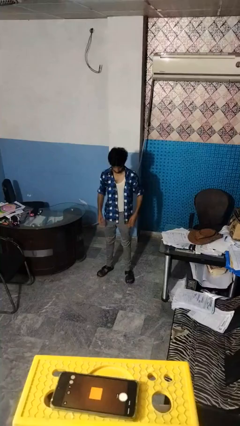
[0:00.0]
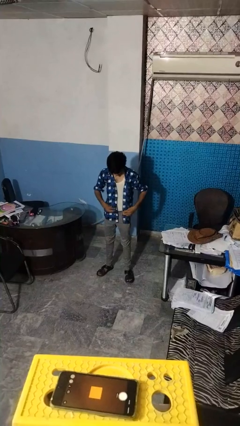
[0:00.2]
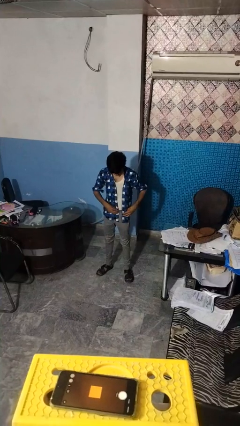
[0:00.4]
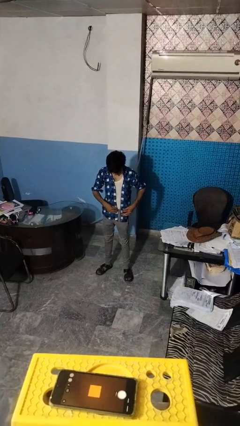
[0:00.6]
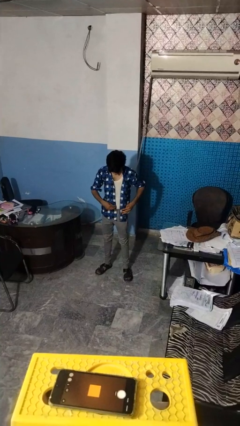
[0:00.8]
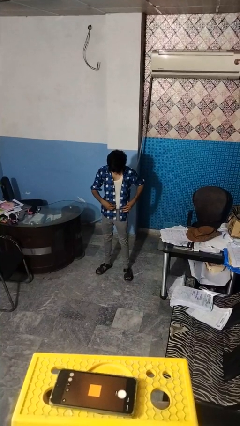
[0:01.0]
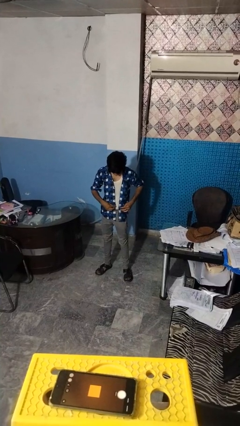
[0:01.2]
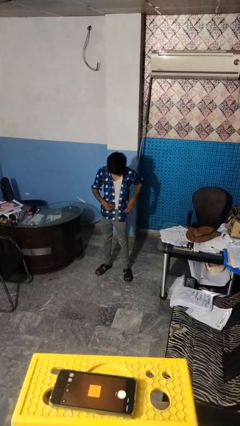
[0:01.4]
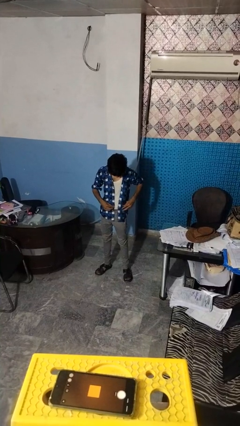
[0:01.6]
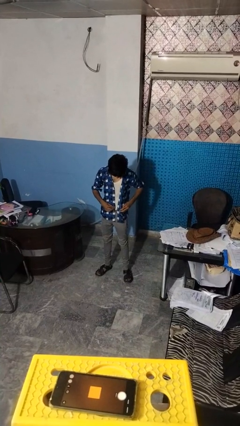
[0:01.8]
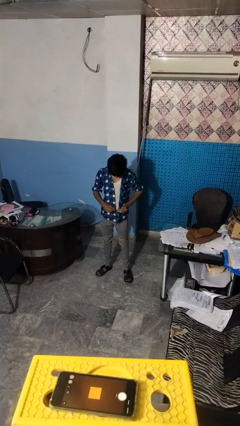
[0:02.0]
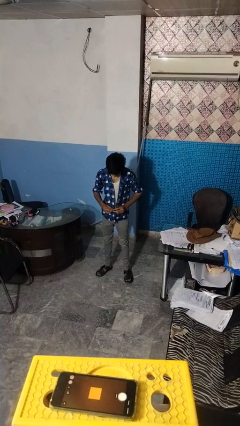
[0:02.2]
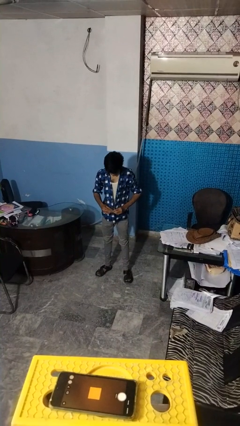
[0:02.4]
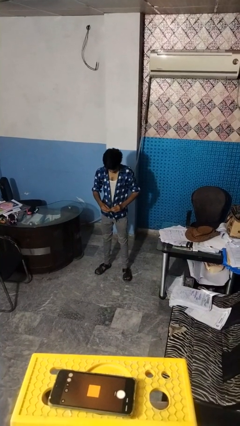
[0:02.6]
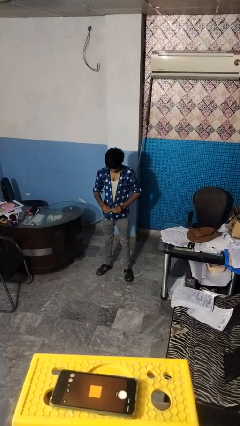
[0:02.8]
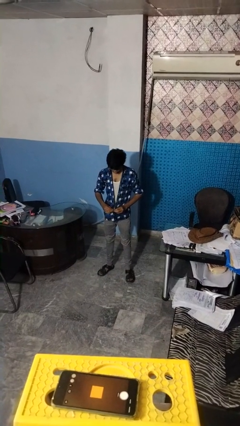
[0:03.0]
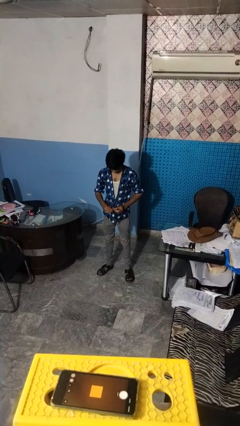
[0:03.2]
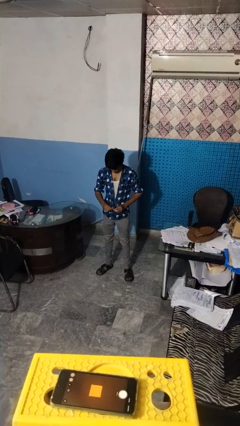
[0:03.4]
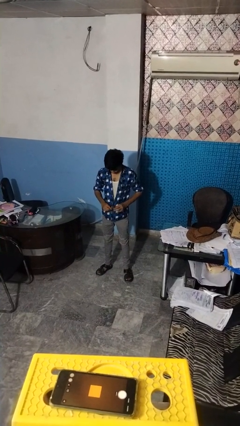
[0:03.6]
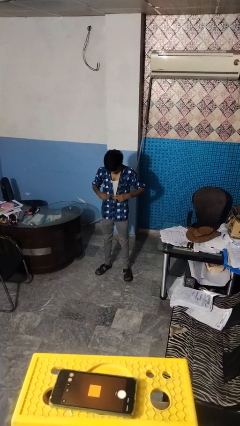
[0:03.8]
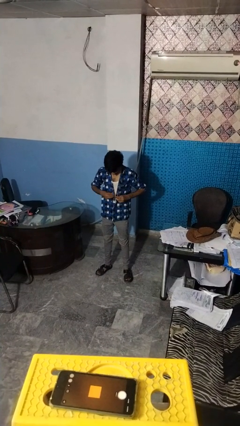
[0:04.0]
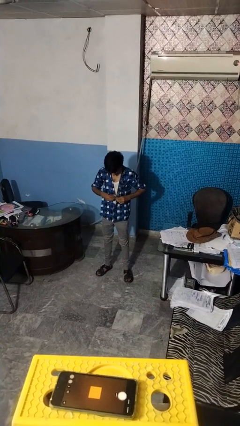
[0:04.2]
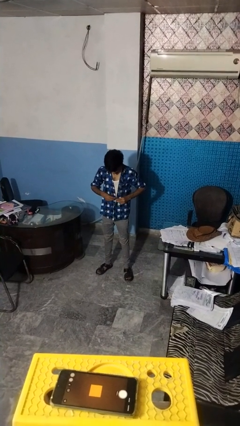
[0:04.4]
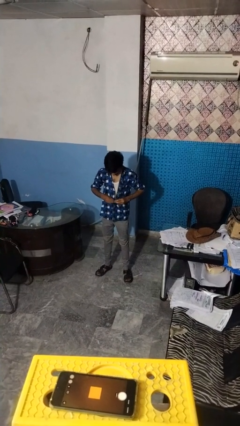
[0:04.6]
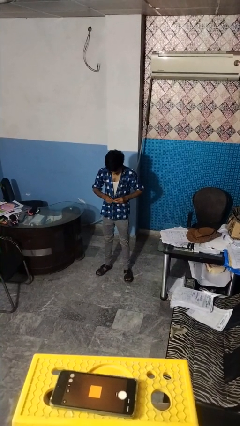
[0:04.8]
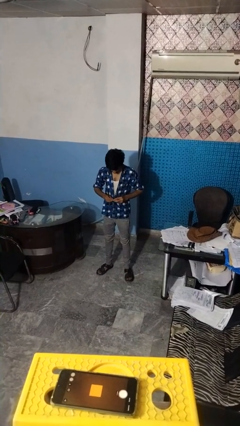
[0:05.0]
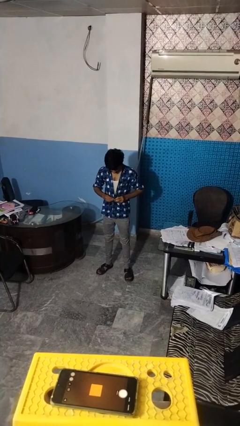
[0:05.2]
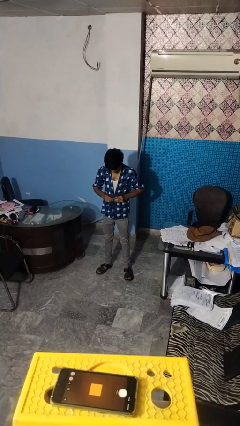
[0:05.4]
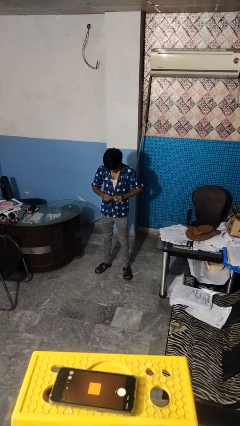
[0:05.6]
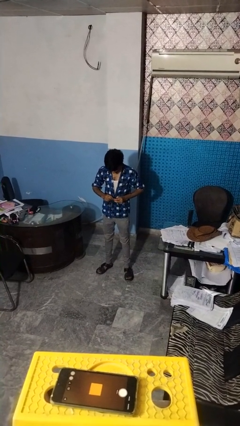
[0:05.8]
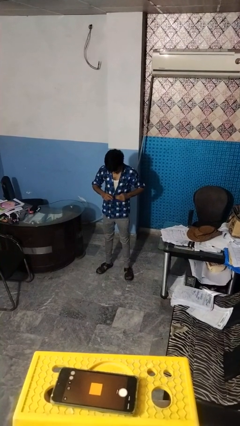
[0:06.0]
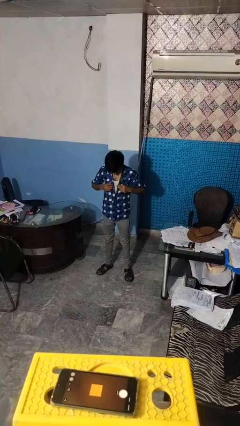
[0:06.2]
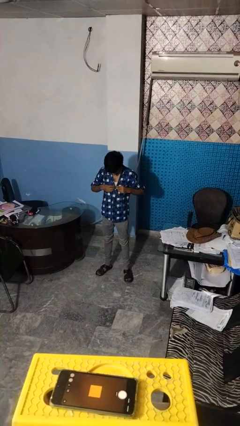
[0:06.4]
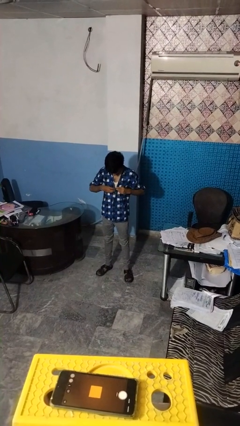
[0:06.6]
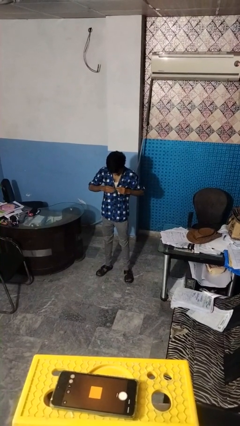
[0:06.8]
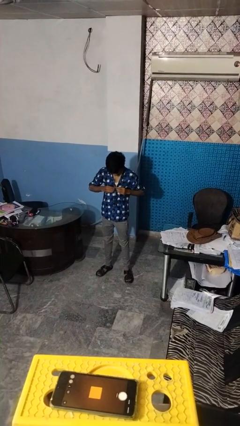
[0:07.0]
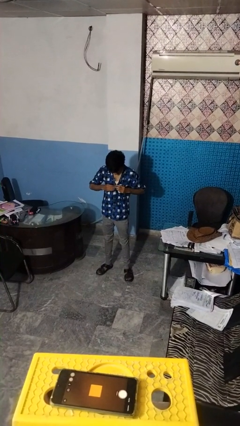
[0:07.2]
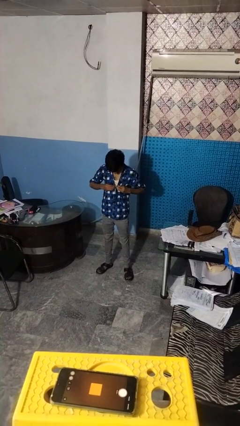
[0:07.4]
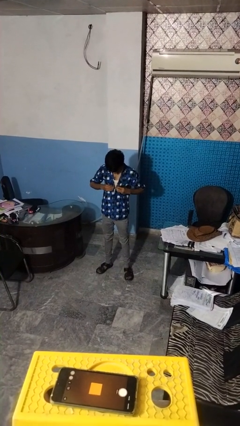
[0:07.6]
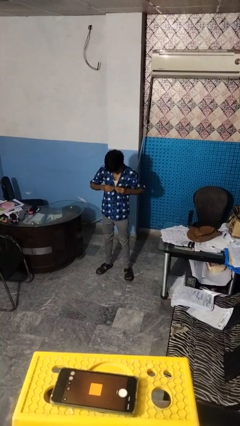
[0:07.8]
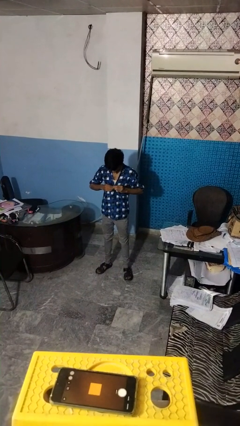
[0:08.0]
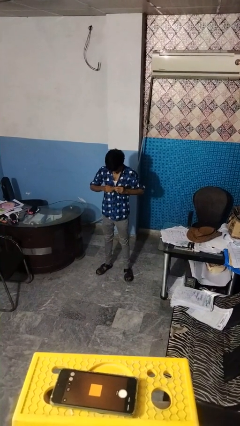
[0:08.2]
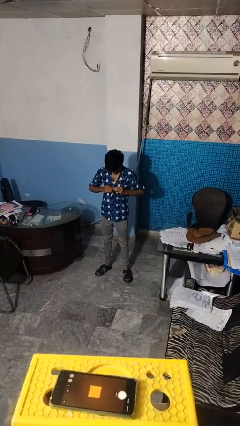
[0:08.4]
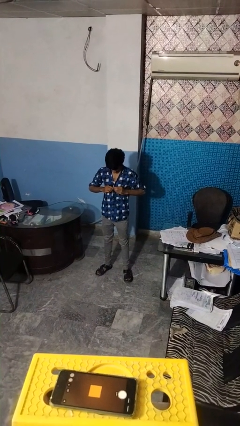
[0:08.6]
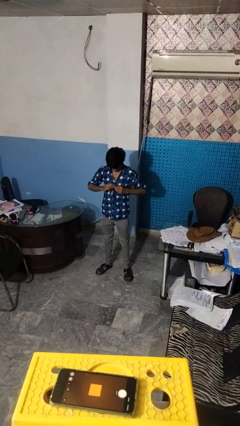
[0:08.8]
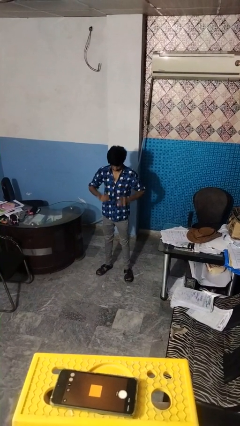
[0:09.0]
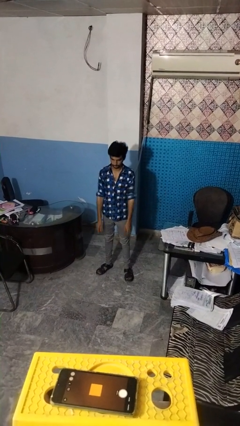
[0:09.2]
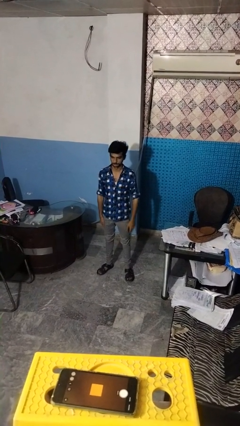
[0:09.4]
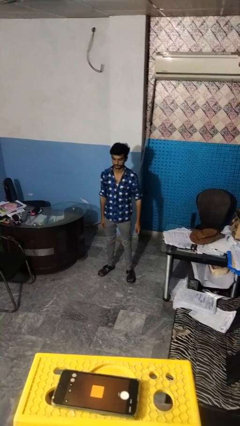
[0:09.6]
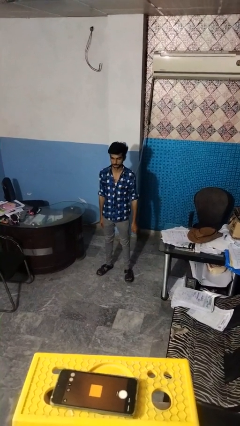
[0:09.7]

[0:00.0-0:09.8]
person buttons shirt

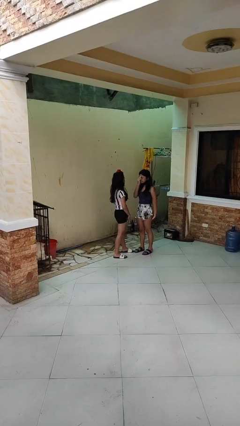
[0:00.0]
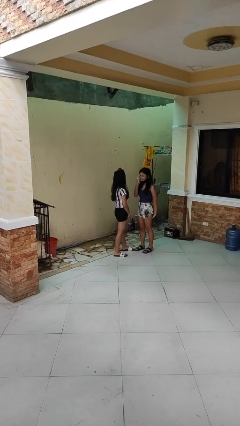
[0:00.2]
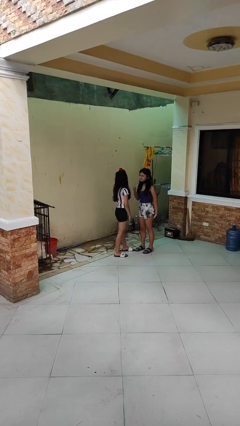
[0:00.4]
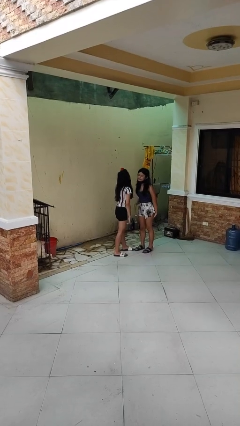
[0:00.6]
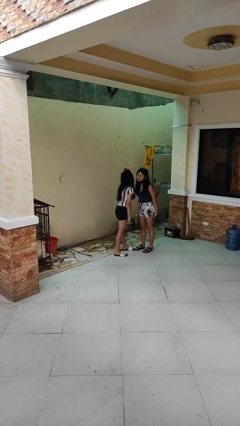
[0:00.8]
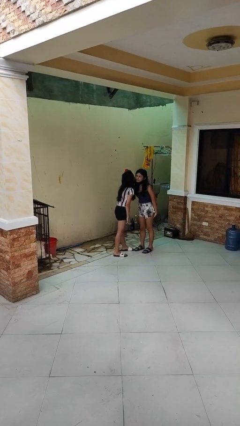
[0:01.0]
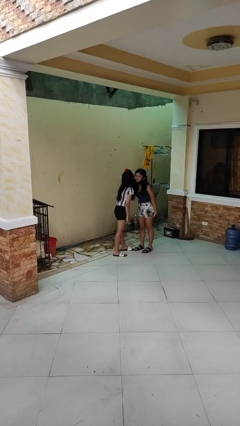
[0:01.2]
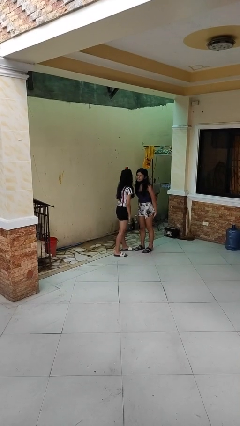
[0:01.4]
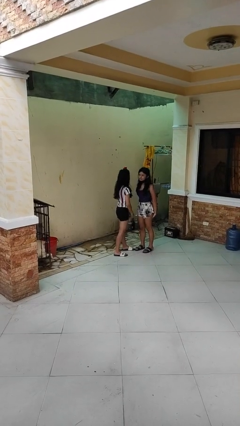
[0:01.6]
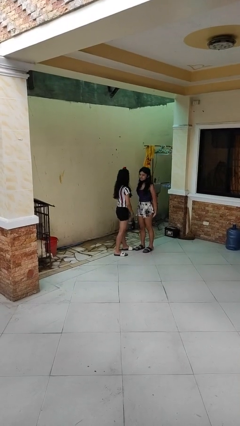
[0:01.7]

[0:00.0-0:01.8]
person kisses cheek of person

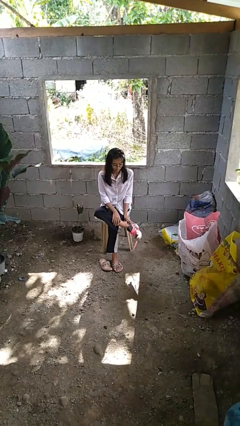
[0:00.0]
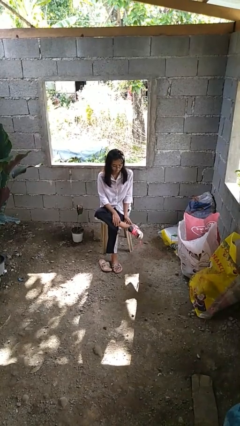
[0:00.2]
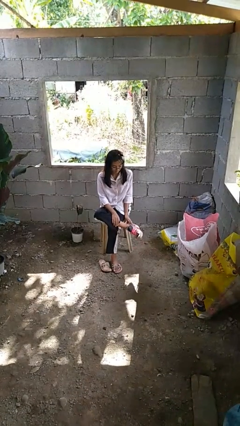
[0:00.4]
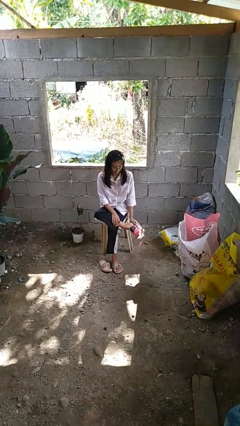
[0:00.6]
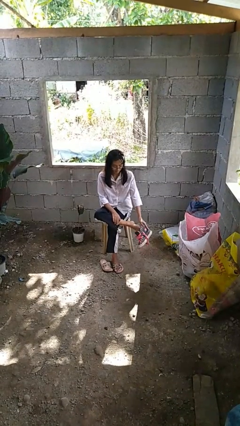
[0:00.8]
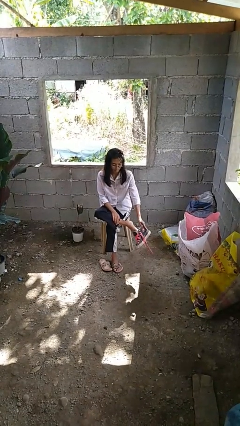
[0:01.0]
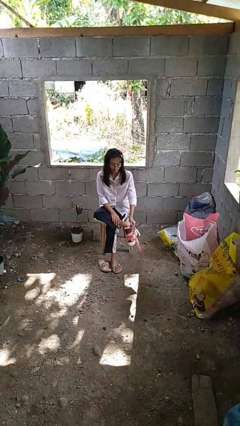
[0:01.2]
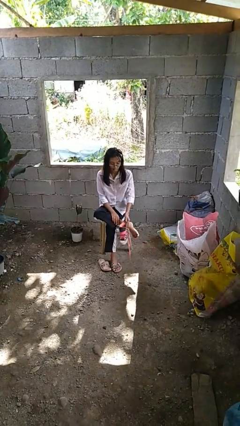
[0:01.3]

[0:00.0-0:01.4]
person takes off shoes

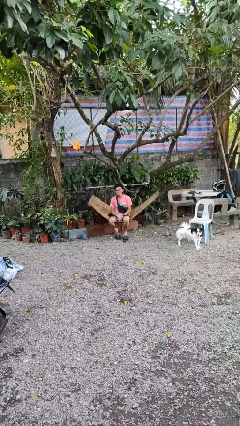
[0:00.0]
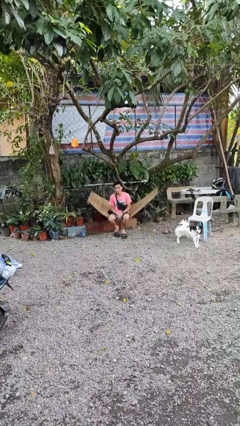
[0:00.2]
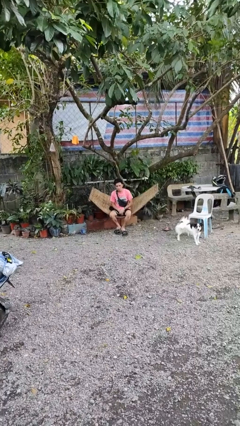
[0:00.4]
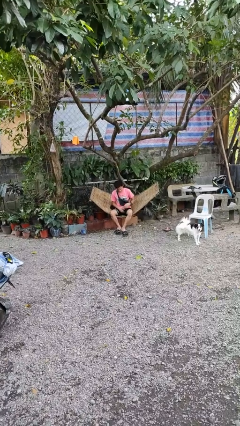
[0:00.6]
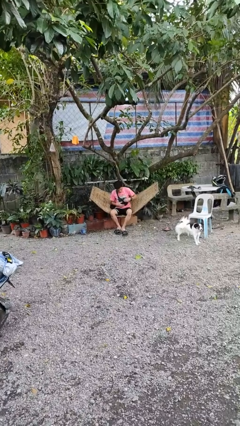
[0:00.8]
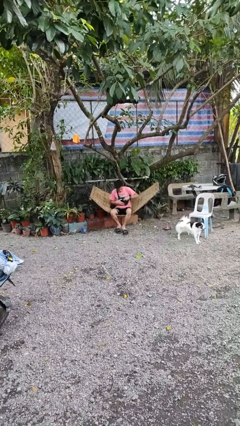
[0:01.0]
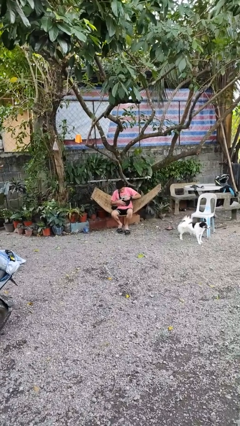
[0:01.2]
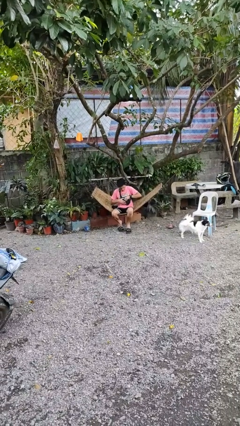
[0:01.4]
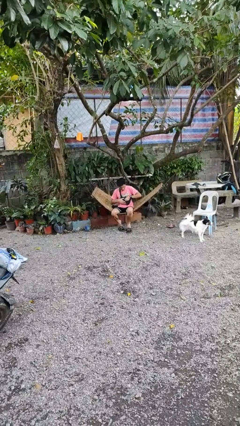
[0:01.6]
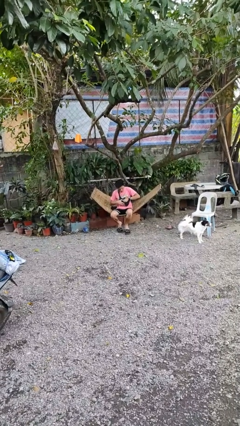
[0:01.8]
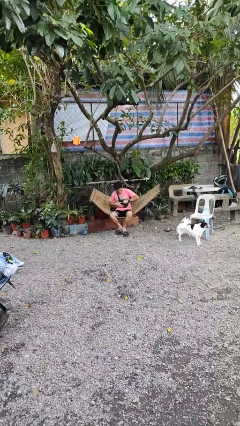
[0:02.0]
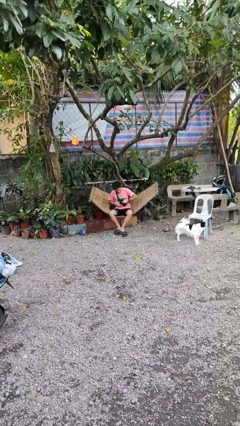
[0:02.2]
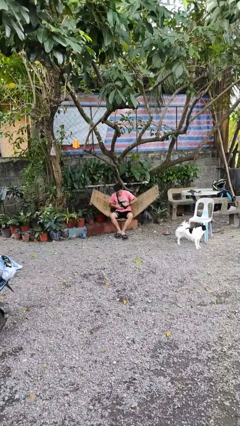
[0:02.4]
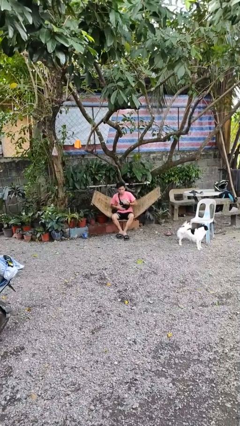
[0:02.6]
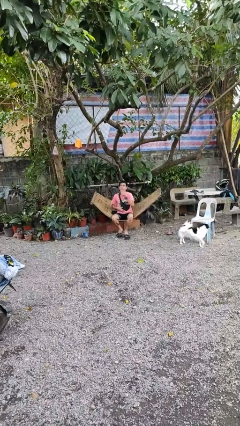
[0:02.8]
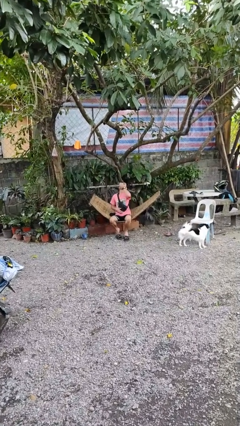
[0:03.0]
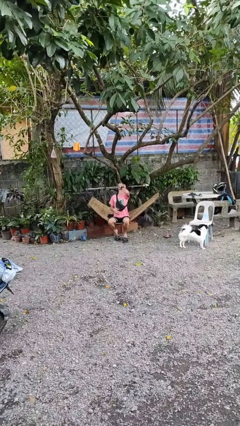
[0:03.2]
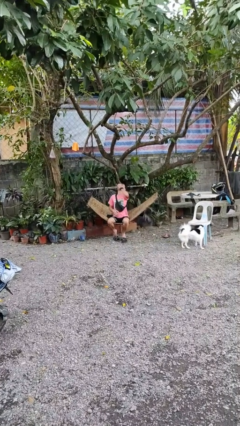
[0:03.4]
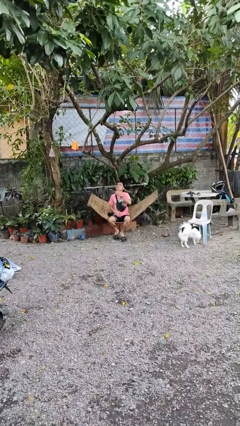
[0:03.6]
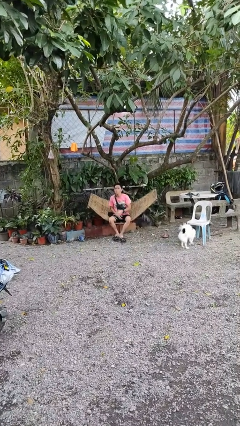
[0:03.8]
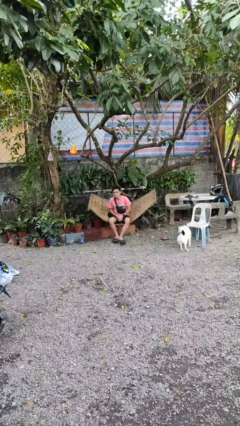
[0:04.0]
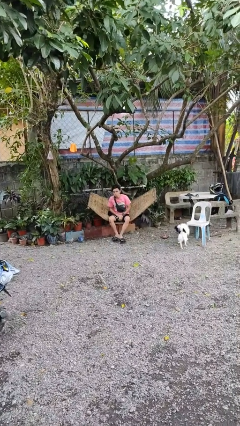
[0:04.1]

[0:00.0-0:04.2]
person eats snack from bag

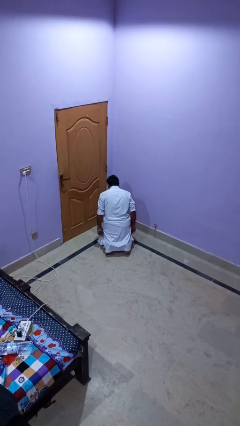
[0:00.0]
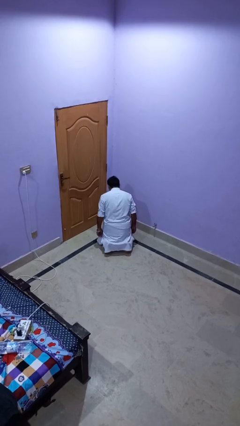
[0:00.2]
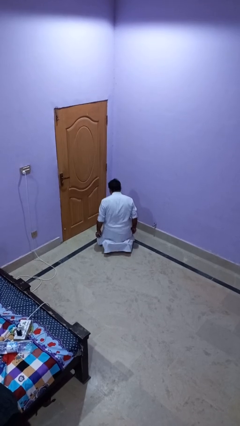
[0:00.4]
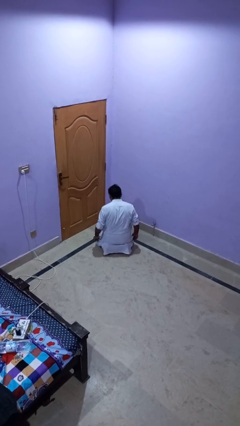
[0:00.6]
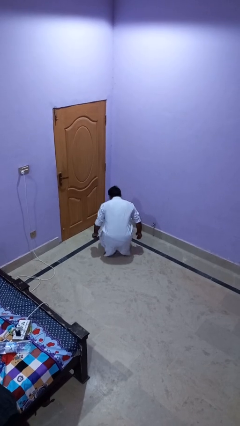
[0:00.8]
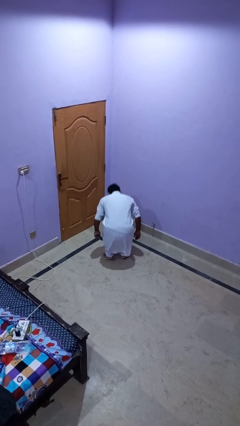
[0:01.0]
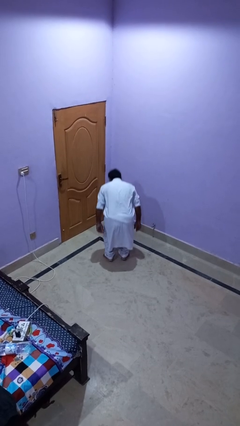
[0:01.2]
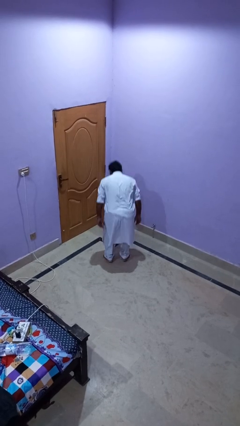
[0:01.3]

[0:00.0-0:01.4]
person stands up from floor
